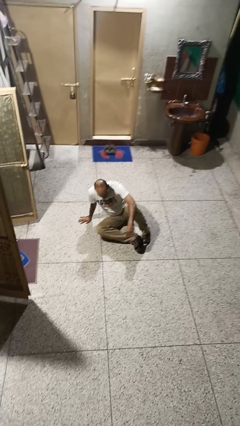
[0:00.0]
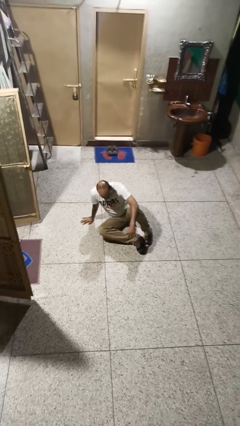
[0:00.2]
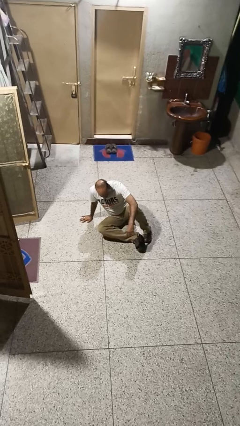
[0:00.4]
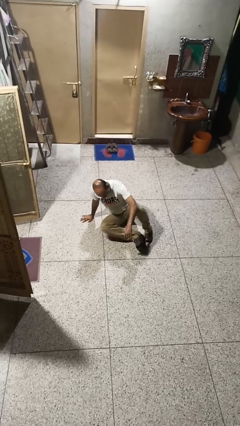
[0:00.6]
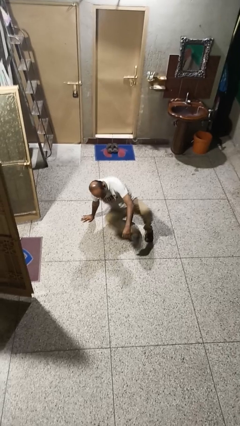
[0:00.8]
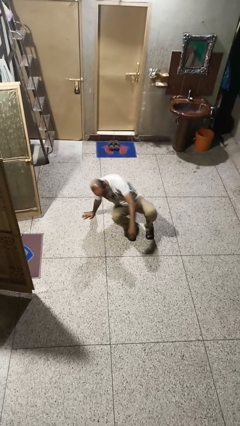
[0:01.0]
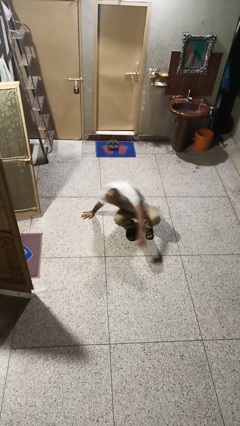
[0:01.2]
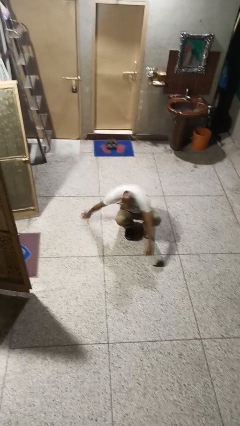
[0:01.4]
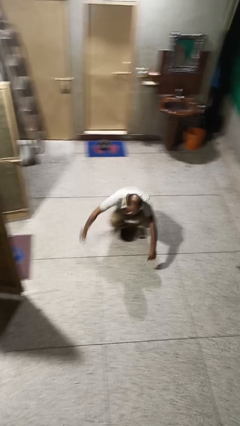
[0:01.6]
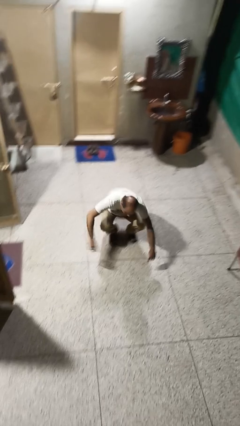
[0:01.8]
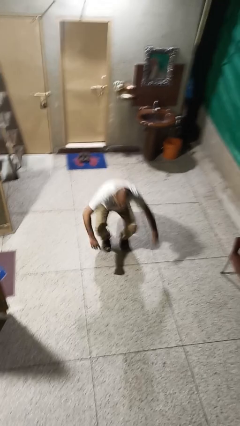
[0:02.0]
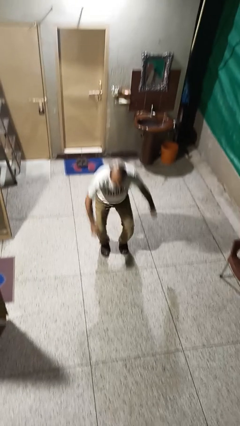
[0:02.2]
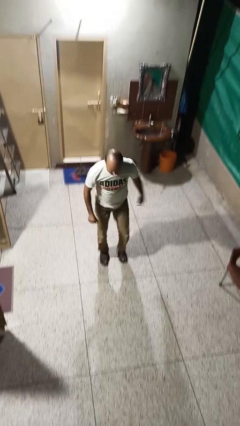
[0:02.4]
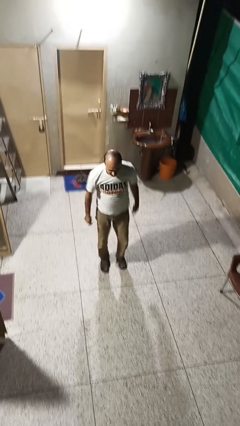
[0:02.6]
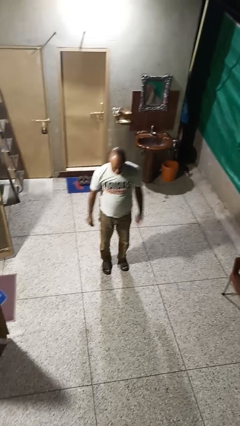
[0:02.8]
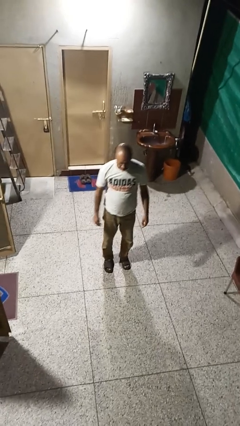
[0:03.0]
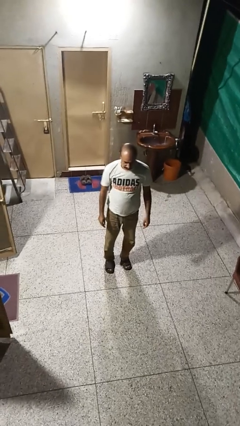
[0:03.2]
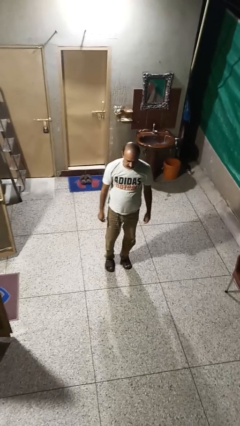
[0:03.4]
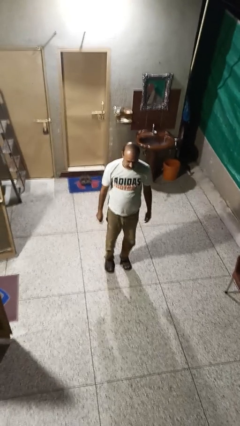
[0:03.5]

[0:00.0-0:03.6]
person stands up from floor

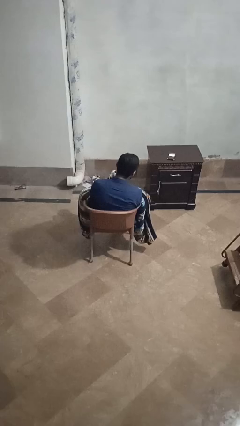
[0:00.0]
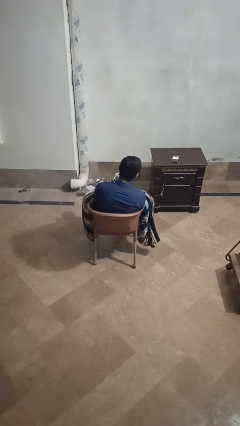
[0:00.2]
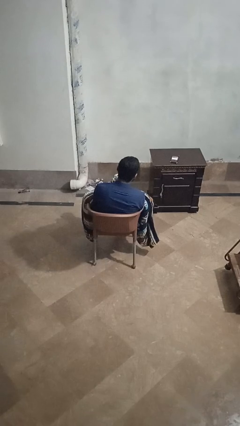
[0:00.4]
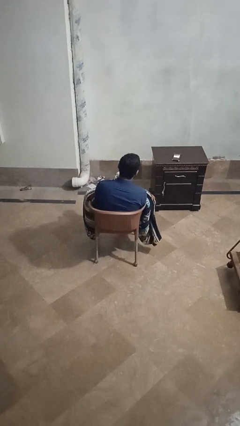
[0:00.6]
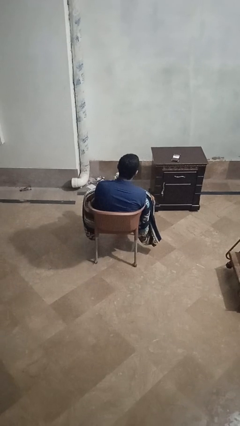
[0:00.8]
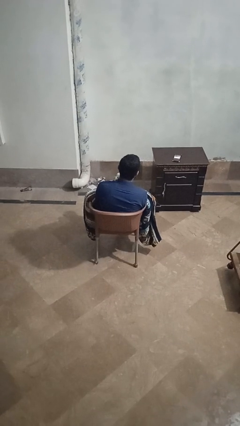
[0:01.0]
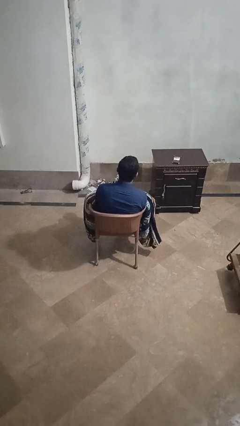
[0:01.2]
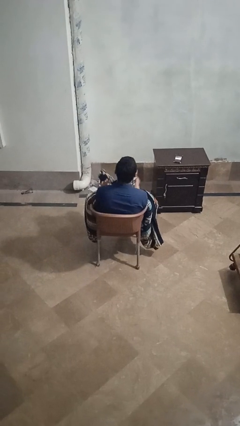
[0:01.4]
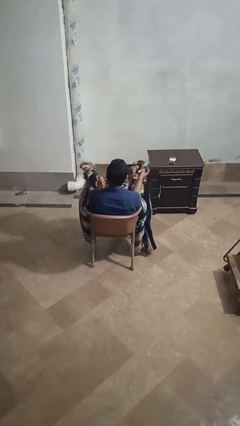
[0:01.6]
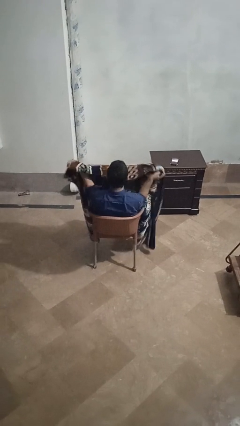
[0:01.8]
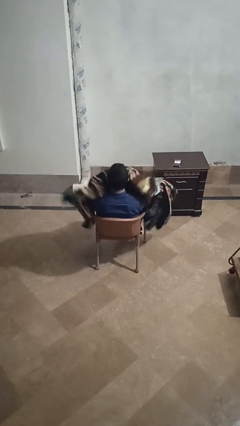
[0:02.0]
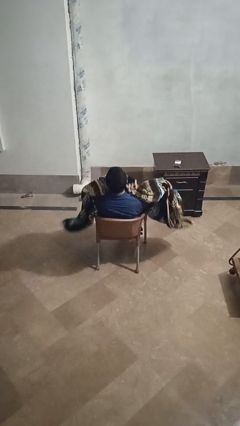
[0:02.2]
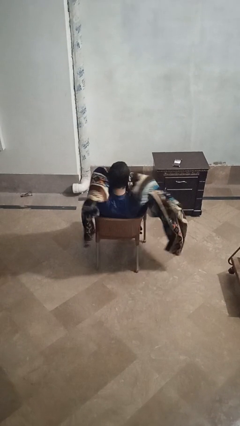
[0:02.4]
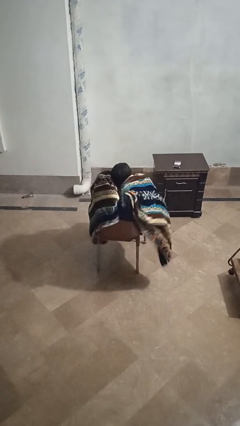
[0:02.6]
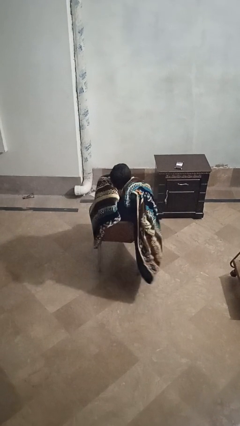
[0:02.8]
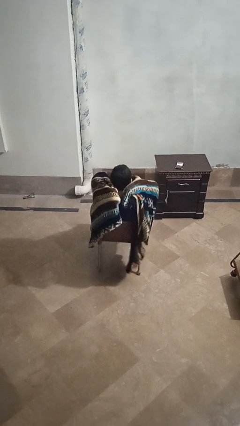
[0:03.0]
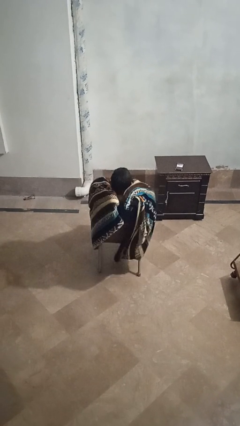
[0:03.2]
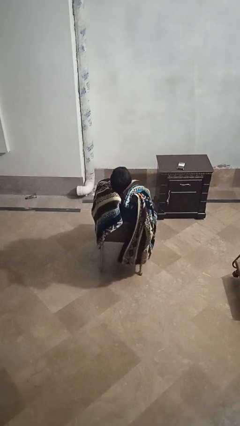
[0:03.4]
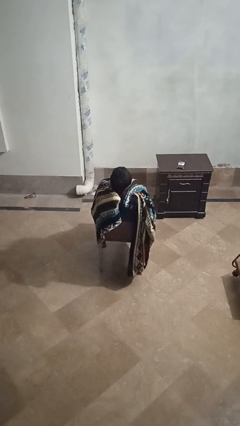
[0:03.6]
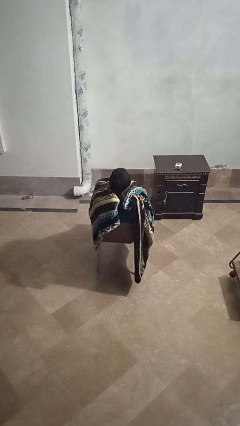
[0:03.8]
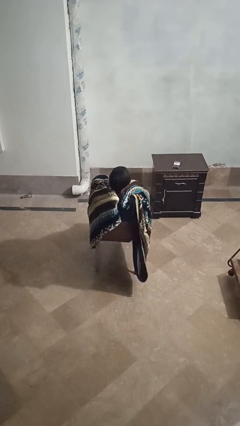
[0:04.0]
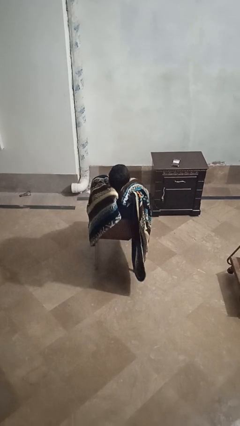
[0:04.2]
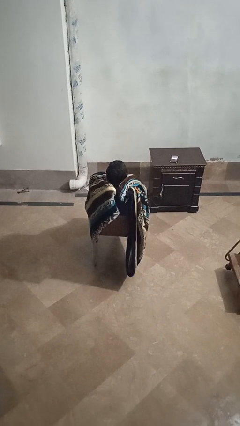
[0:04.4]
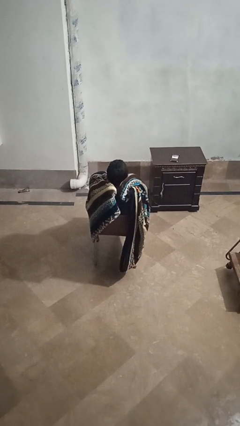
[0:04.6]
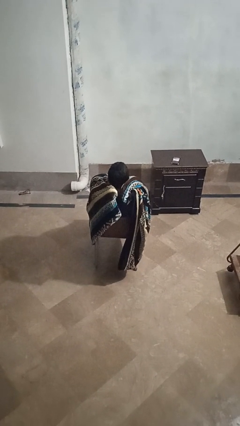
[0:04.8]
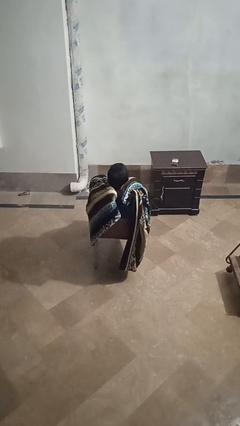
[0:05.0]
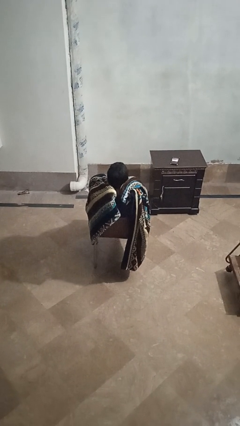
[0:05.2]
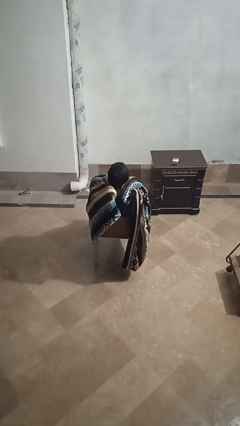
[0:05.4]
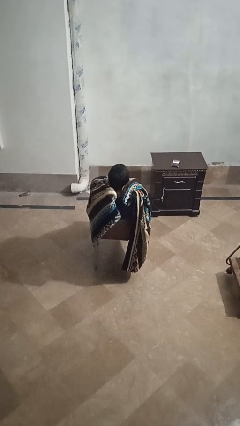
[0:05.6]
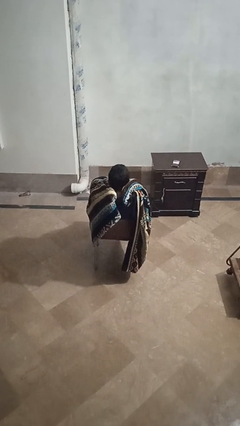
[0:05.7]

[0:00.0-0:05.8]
person covers with blanket

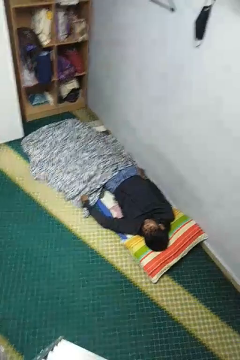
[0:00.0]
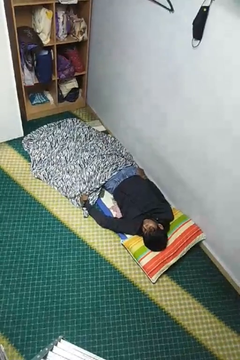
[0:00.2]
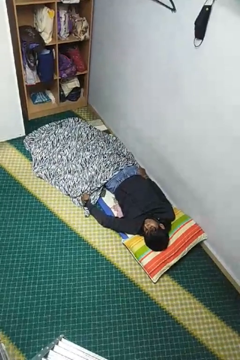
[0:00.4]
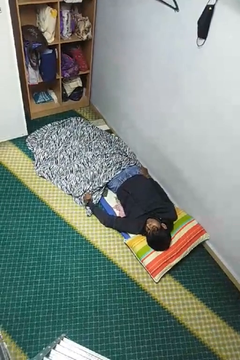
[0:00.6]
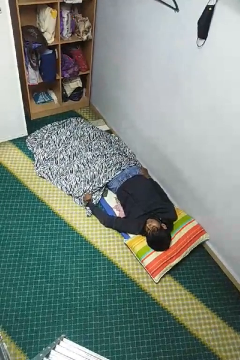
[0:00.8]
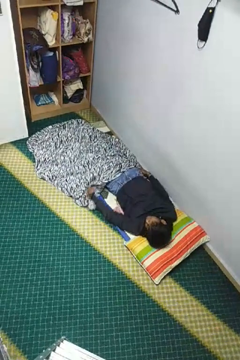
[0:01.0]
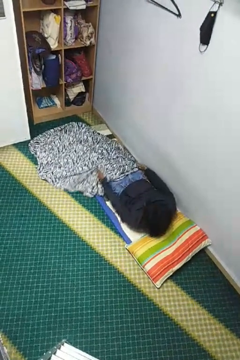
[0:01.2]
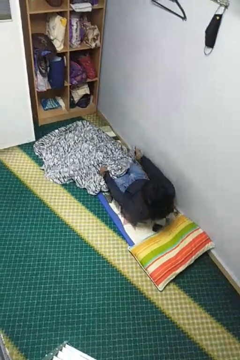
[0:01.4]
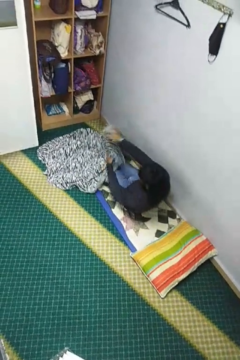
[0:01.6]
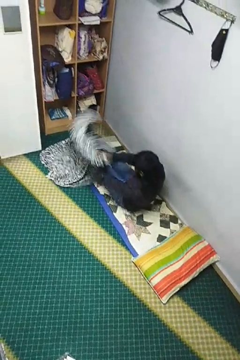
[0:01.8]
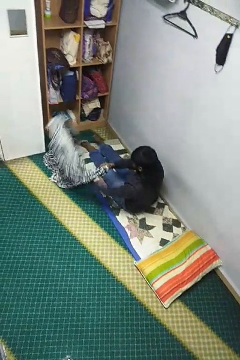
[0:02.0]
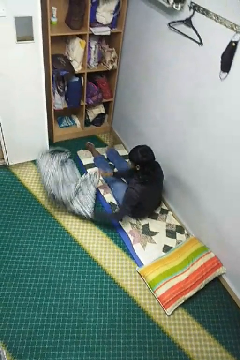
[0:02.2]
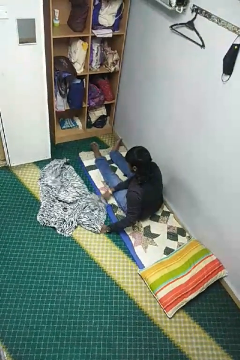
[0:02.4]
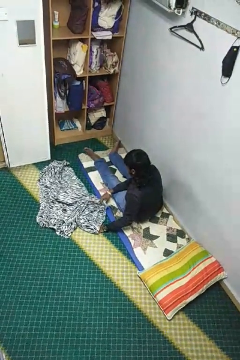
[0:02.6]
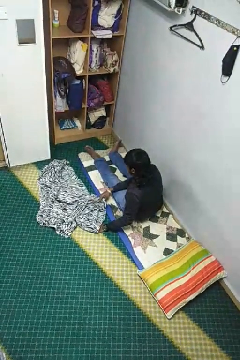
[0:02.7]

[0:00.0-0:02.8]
person uncovers with blanket

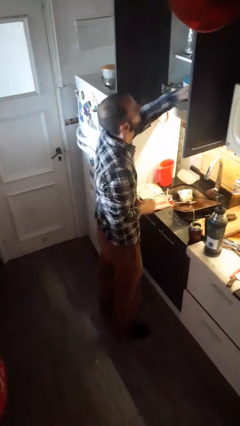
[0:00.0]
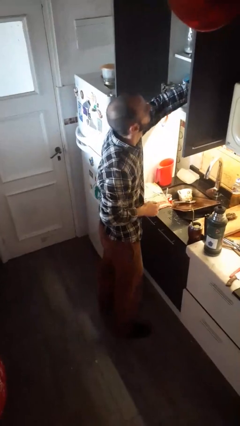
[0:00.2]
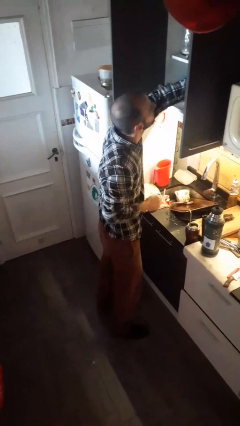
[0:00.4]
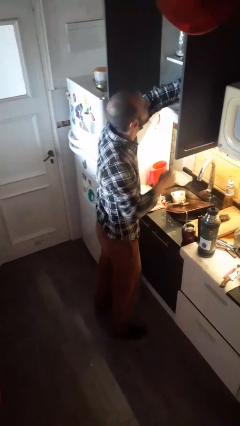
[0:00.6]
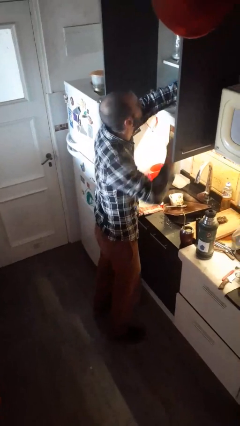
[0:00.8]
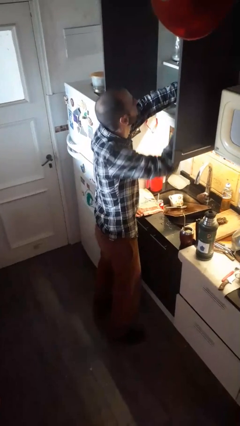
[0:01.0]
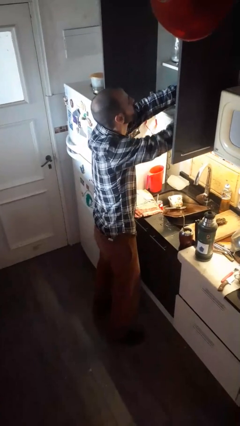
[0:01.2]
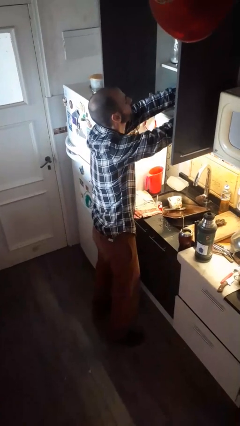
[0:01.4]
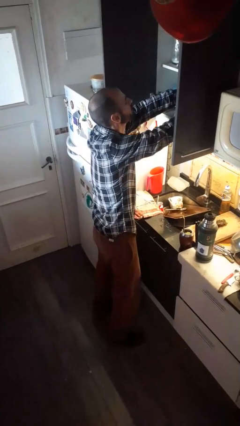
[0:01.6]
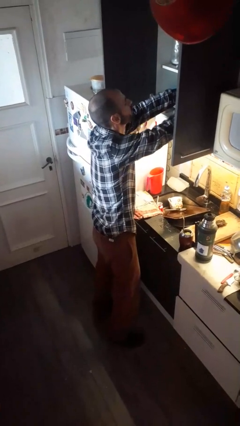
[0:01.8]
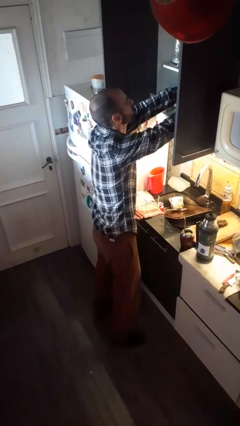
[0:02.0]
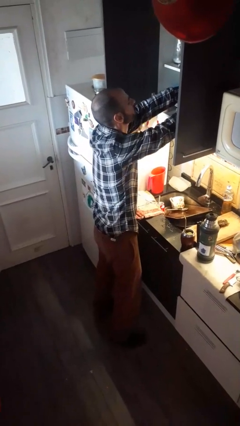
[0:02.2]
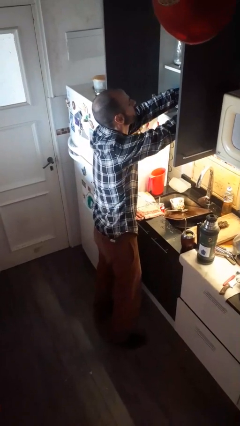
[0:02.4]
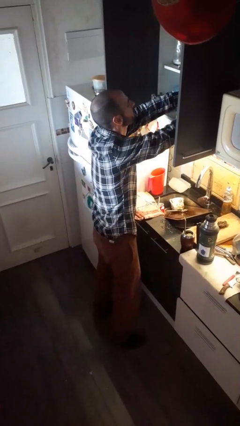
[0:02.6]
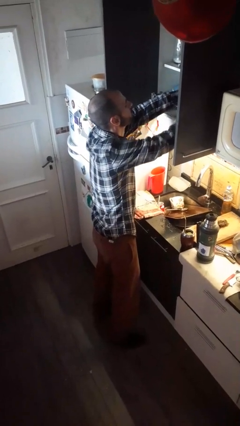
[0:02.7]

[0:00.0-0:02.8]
person searches in kitchen drawer

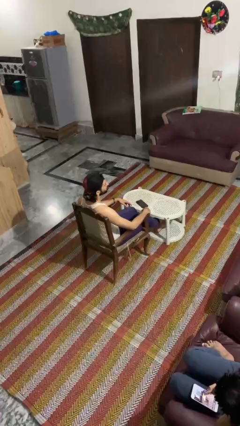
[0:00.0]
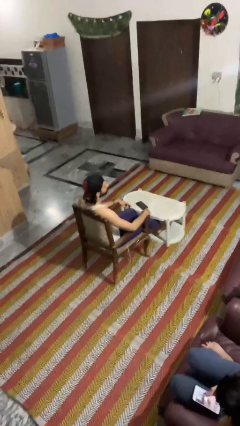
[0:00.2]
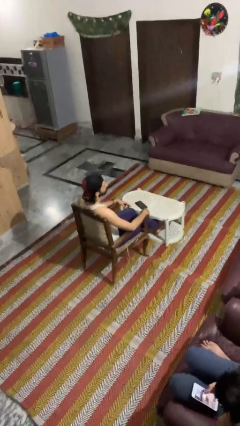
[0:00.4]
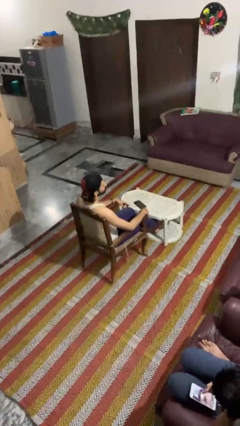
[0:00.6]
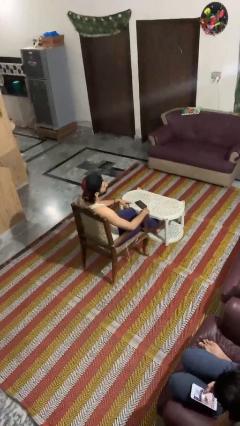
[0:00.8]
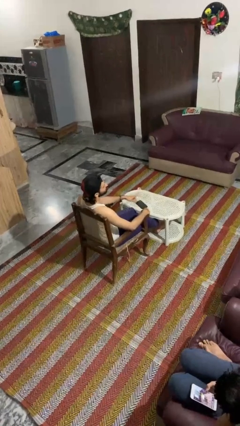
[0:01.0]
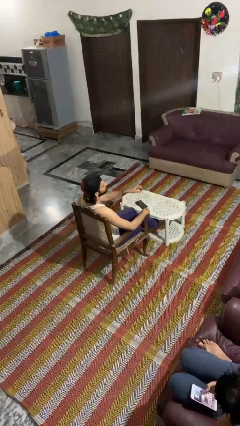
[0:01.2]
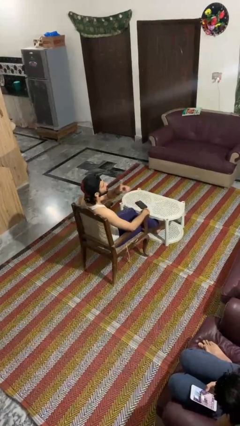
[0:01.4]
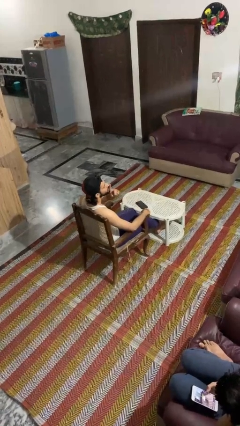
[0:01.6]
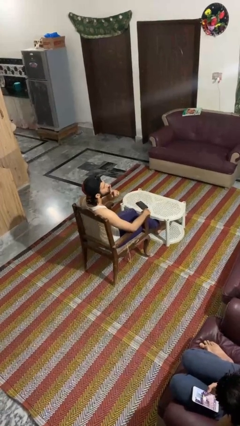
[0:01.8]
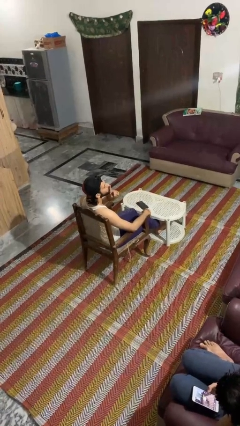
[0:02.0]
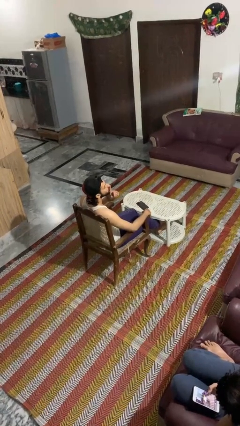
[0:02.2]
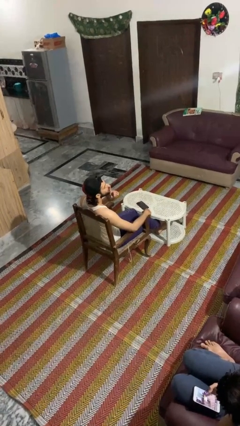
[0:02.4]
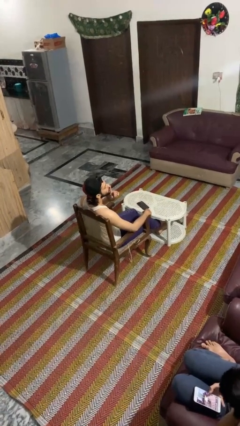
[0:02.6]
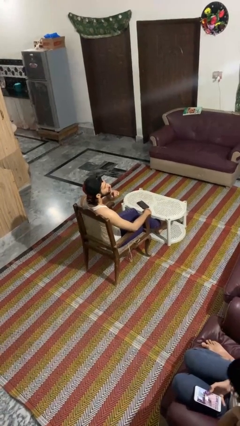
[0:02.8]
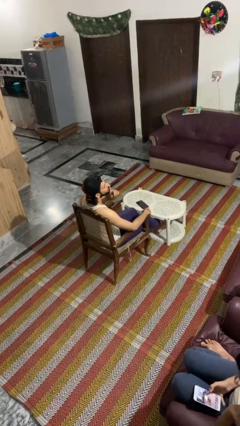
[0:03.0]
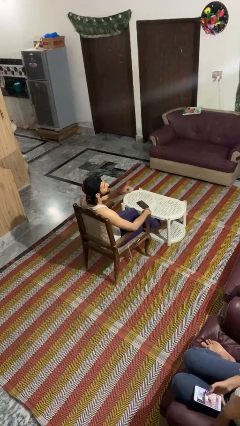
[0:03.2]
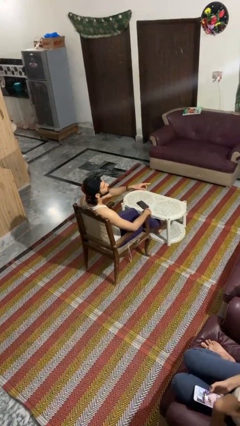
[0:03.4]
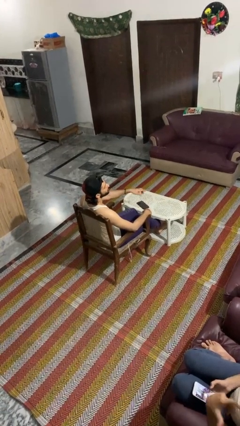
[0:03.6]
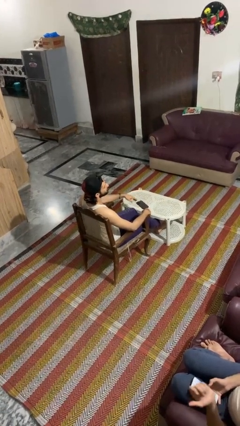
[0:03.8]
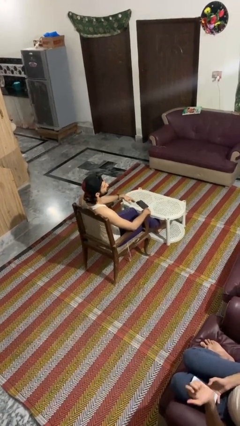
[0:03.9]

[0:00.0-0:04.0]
person gestures be quiet
